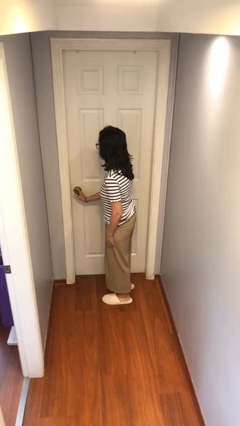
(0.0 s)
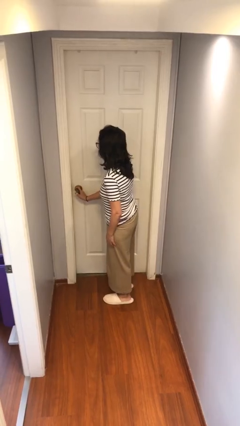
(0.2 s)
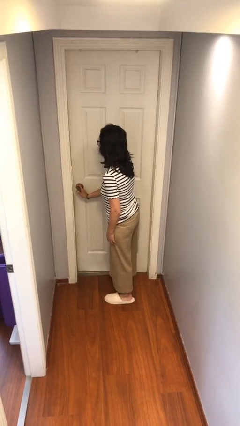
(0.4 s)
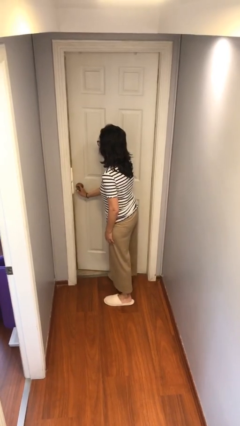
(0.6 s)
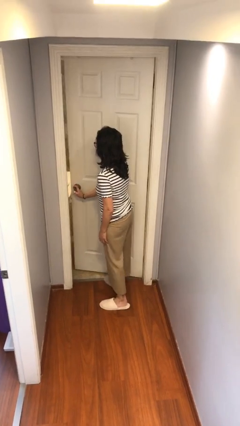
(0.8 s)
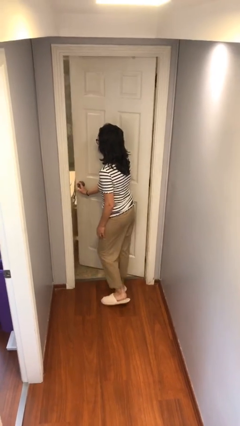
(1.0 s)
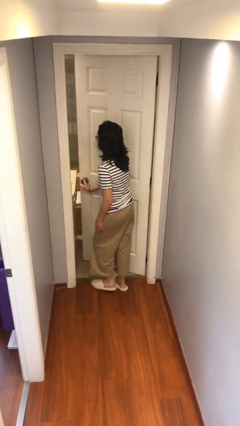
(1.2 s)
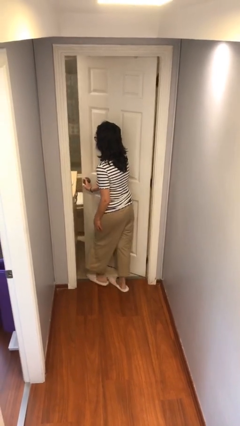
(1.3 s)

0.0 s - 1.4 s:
person opens facility door

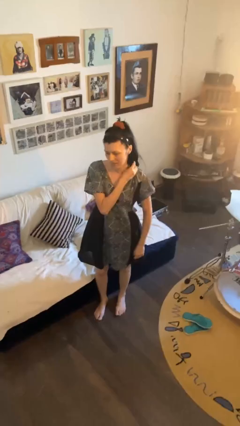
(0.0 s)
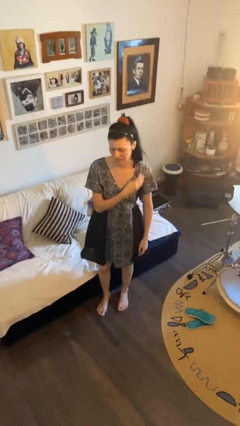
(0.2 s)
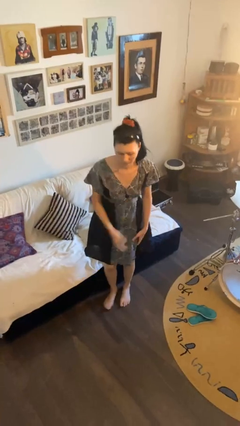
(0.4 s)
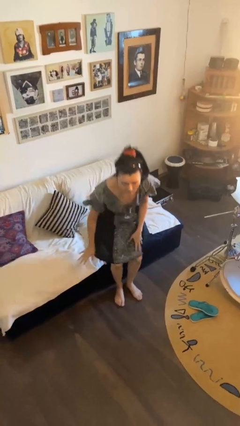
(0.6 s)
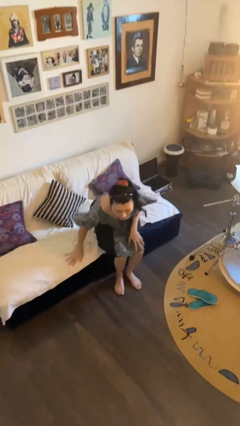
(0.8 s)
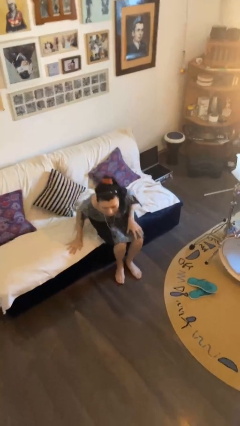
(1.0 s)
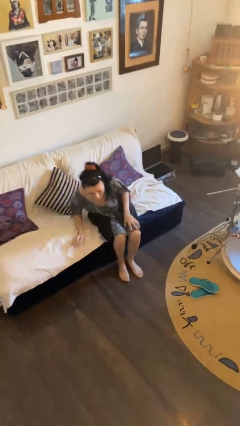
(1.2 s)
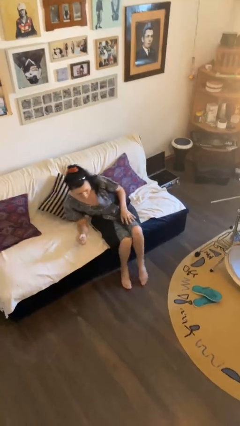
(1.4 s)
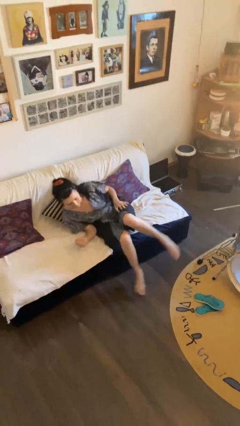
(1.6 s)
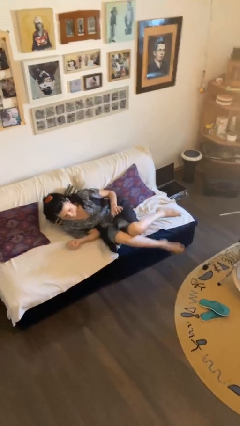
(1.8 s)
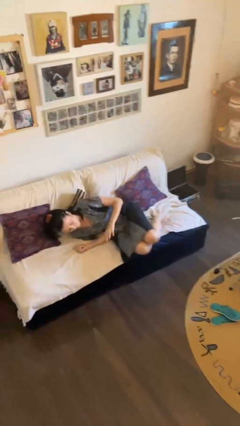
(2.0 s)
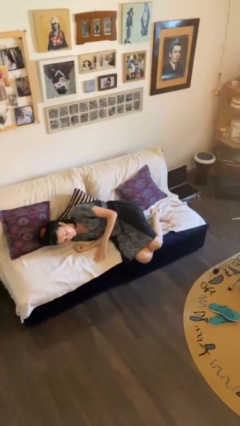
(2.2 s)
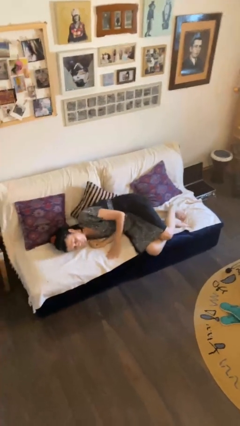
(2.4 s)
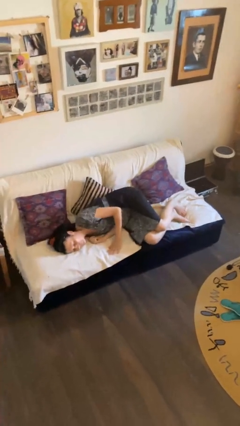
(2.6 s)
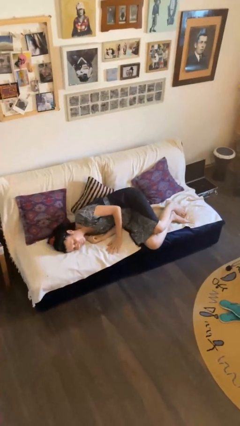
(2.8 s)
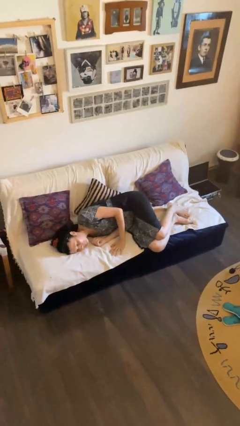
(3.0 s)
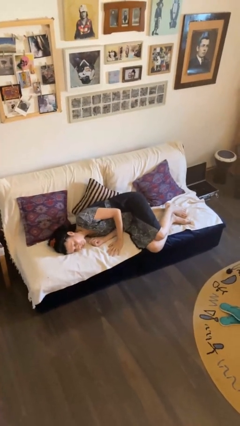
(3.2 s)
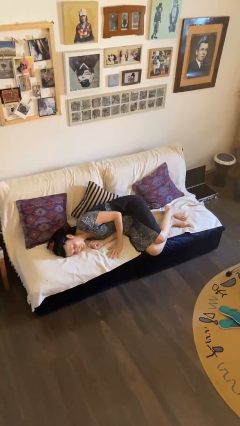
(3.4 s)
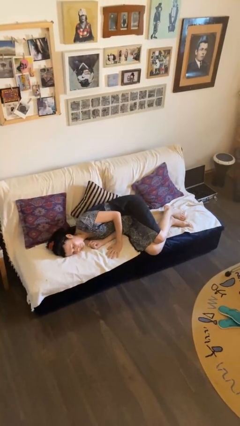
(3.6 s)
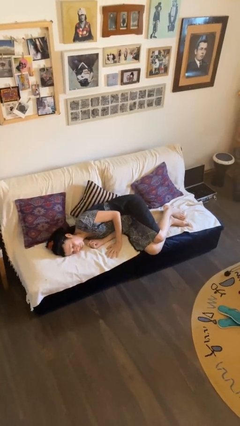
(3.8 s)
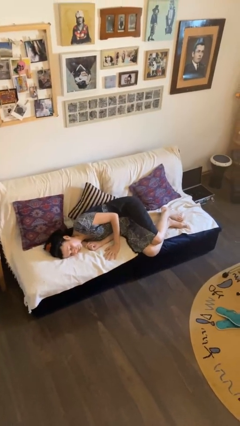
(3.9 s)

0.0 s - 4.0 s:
person lies down on couch

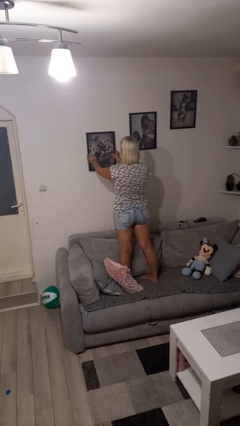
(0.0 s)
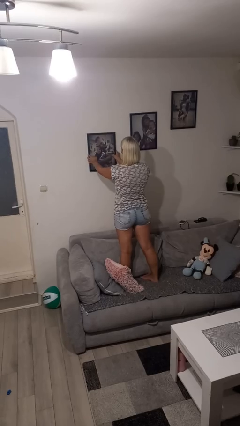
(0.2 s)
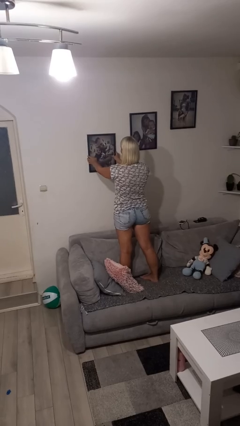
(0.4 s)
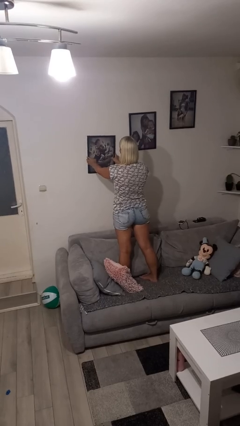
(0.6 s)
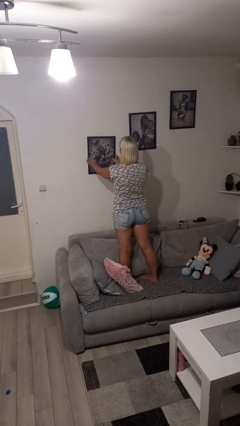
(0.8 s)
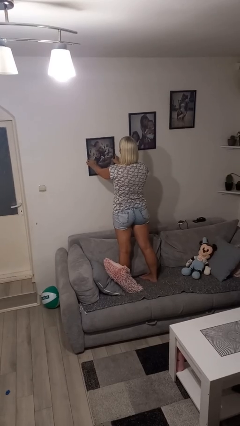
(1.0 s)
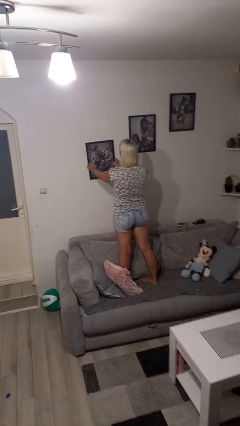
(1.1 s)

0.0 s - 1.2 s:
person puts up picture frame

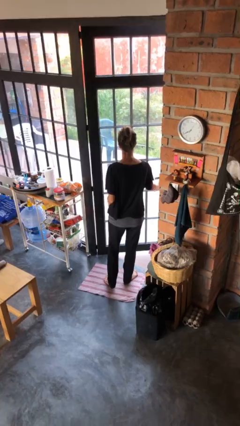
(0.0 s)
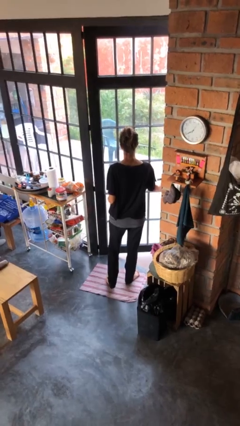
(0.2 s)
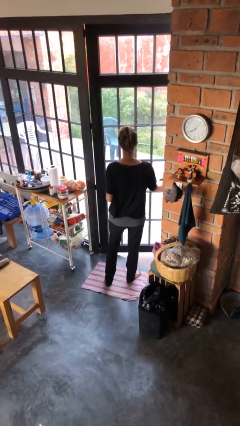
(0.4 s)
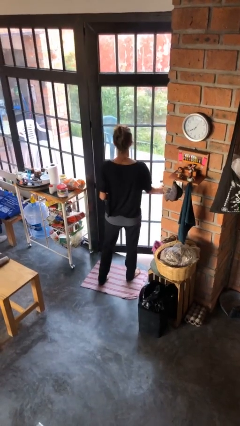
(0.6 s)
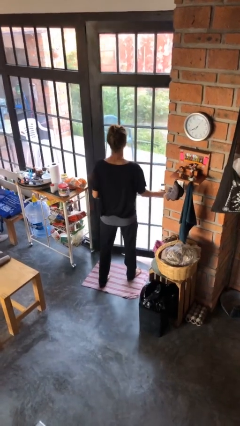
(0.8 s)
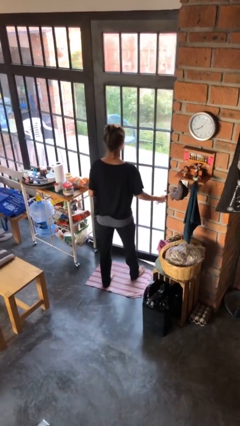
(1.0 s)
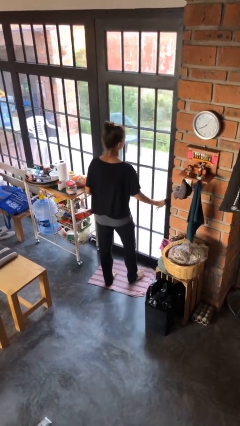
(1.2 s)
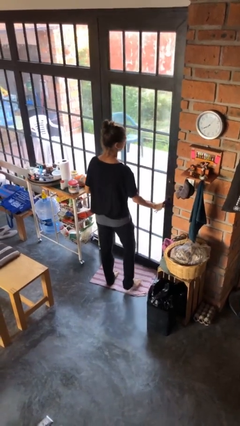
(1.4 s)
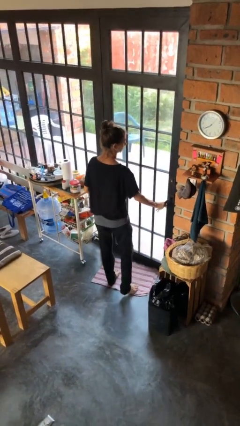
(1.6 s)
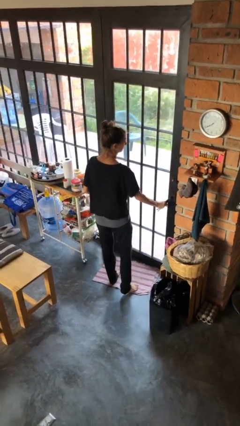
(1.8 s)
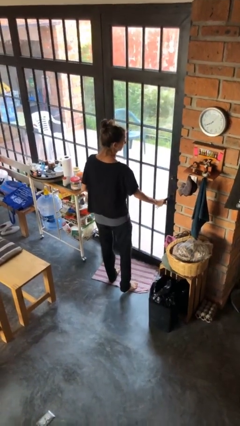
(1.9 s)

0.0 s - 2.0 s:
person closes facility door

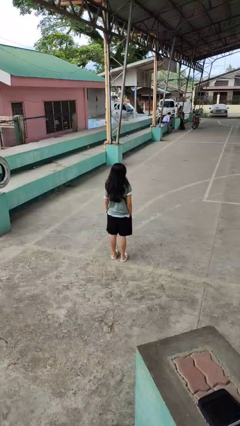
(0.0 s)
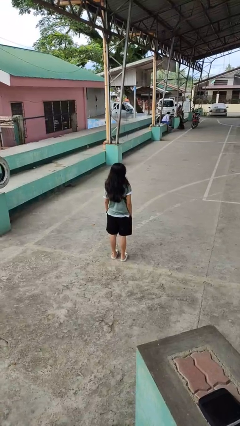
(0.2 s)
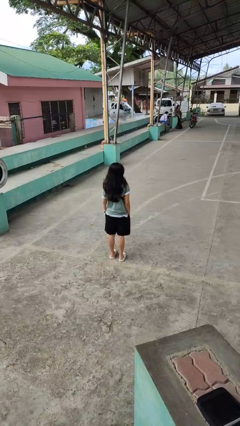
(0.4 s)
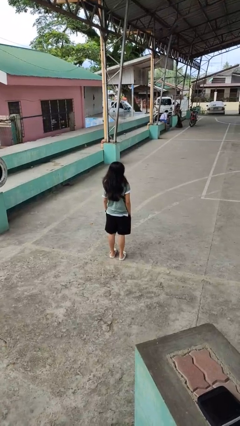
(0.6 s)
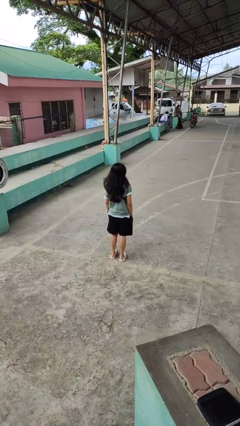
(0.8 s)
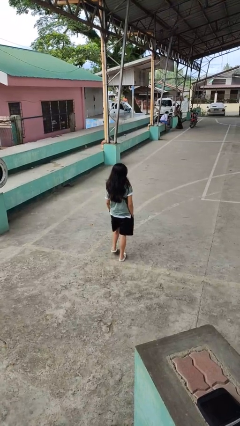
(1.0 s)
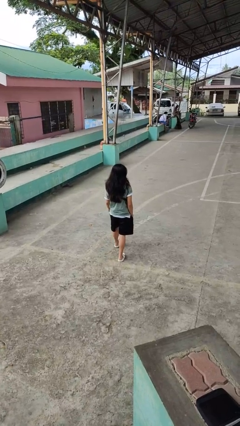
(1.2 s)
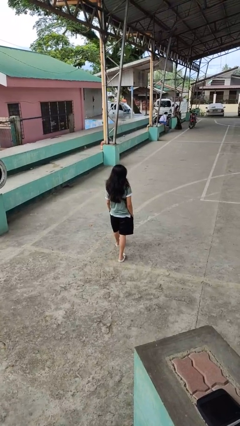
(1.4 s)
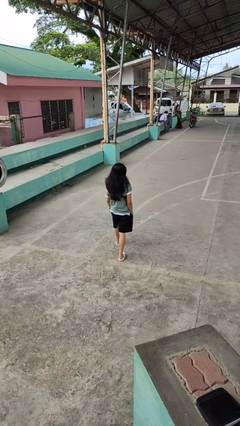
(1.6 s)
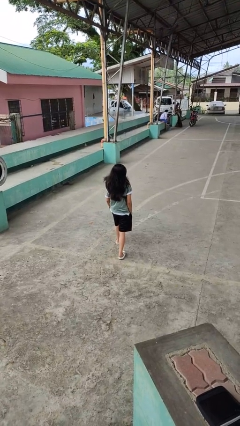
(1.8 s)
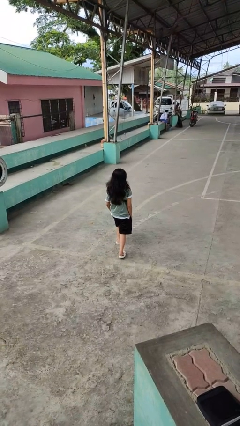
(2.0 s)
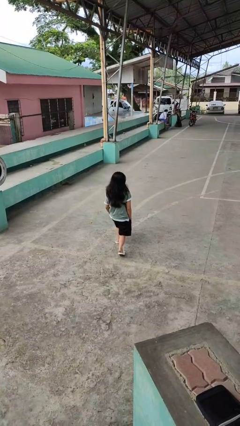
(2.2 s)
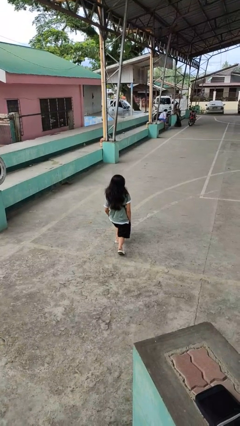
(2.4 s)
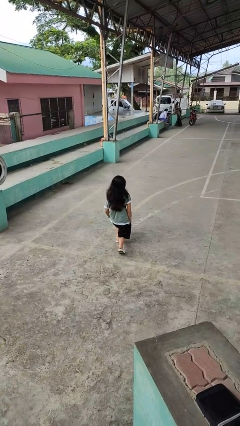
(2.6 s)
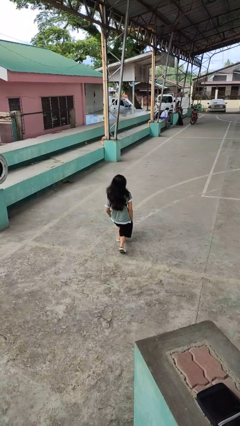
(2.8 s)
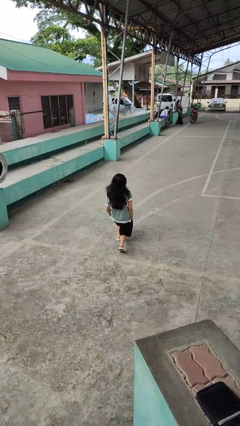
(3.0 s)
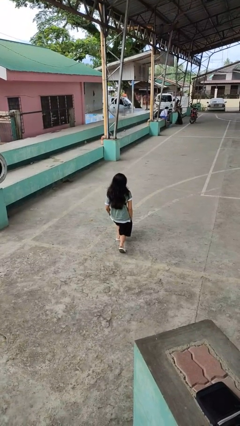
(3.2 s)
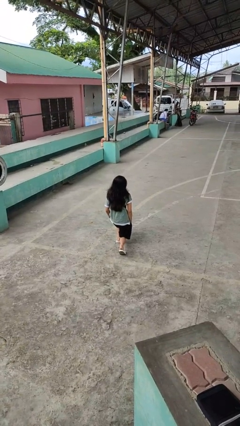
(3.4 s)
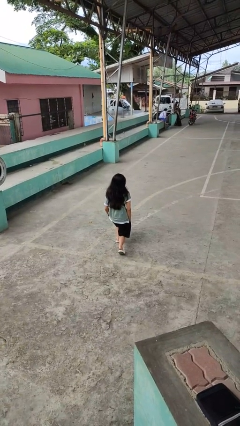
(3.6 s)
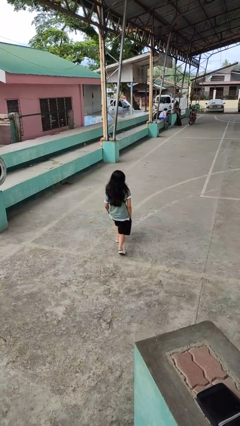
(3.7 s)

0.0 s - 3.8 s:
person exercises with lunges

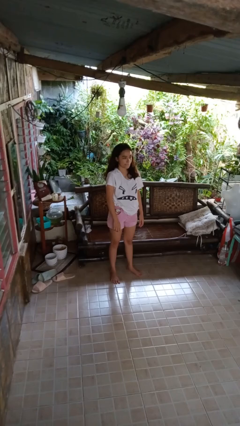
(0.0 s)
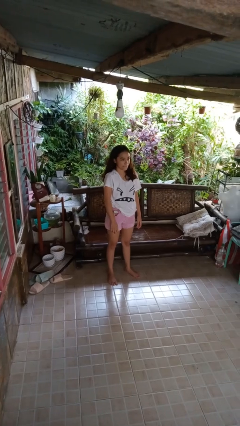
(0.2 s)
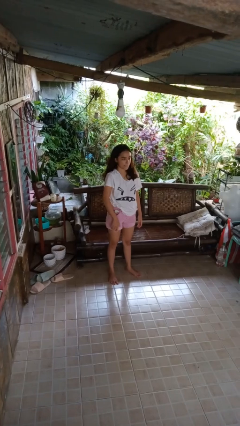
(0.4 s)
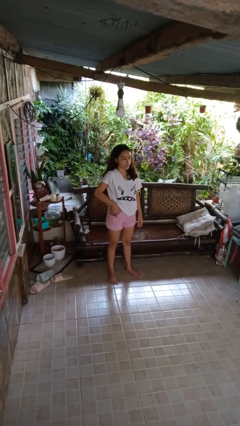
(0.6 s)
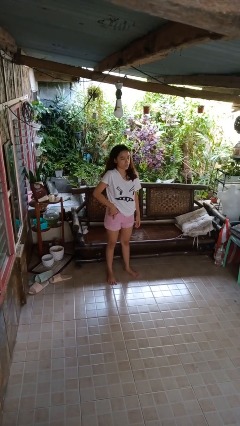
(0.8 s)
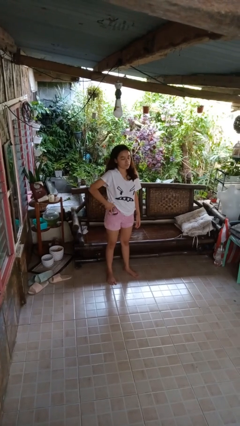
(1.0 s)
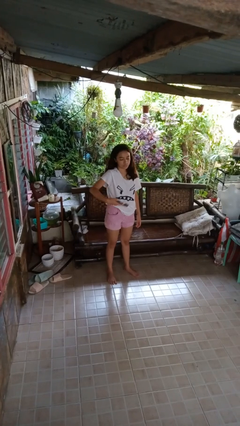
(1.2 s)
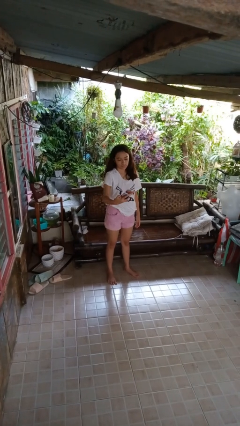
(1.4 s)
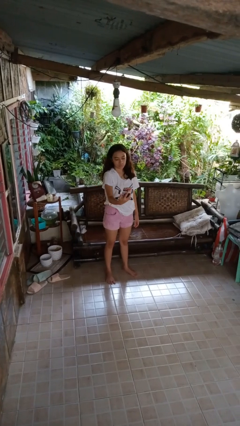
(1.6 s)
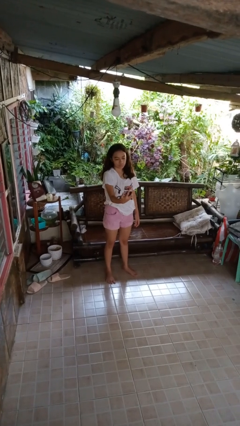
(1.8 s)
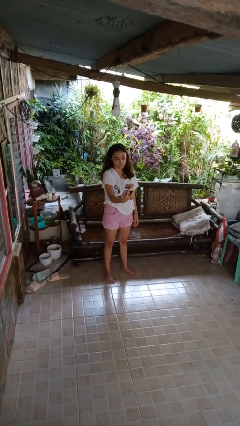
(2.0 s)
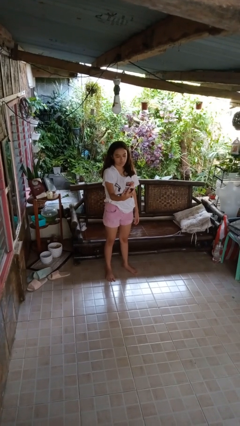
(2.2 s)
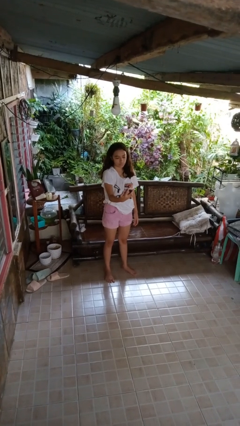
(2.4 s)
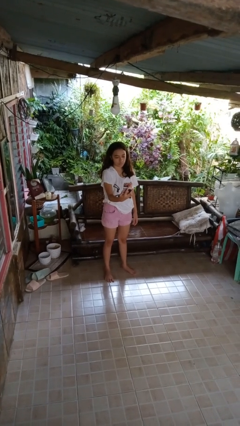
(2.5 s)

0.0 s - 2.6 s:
person takes phone from pocket

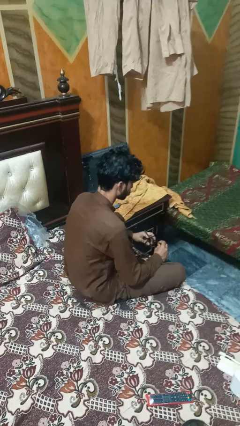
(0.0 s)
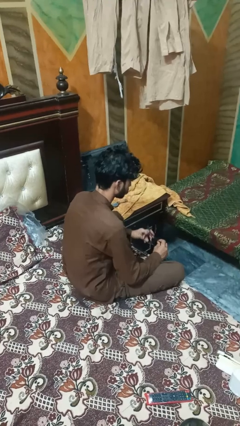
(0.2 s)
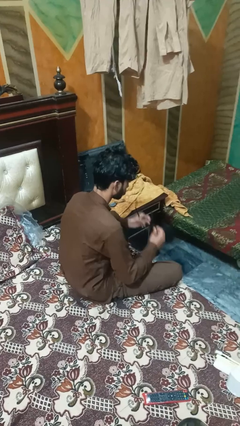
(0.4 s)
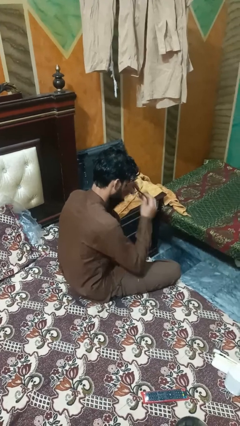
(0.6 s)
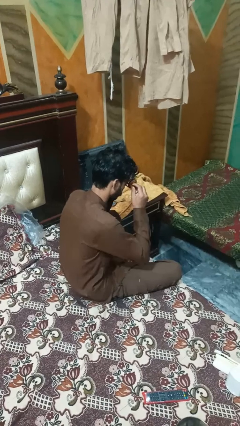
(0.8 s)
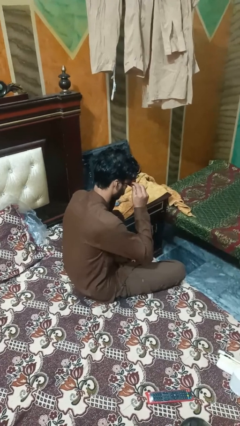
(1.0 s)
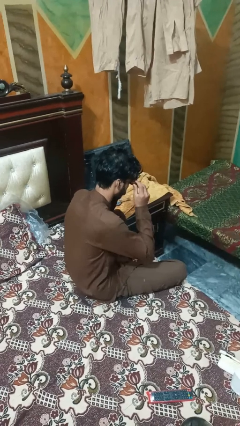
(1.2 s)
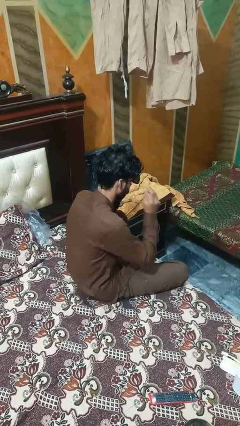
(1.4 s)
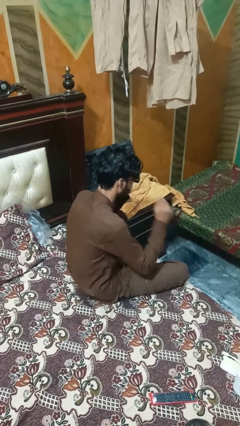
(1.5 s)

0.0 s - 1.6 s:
person puts on sunglasses

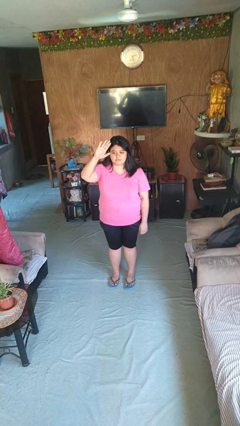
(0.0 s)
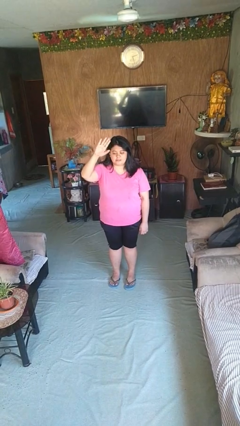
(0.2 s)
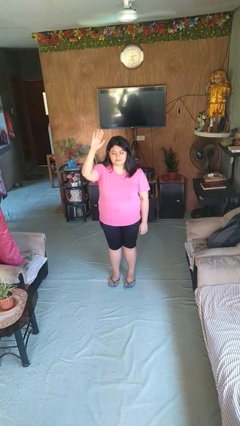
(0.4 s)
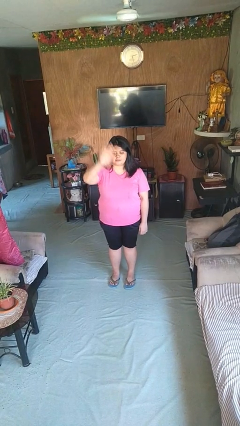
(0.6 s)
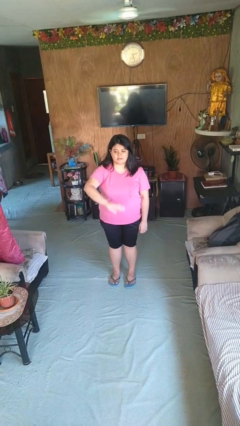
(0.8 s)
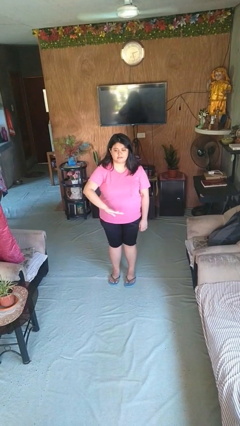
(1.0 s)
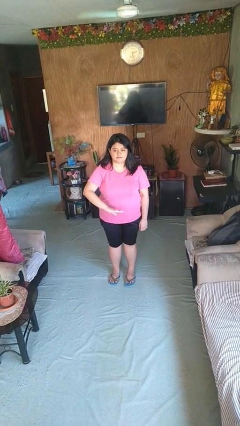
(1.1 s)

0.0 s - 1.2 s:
person gestures swipe down
